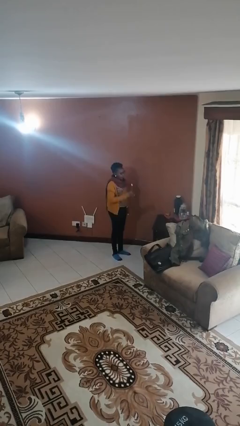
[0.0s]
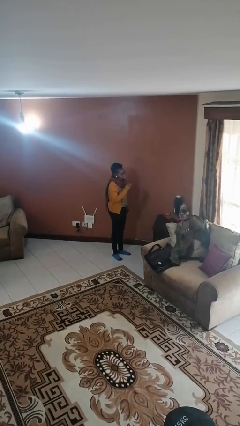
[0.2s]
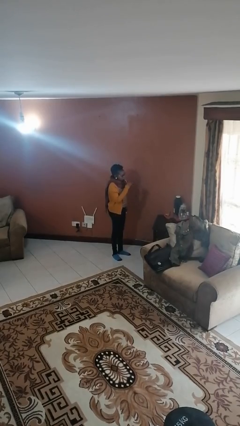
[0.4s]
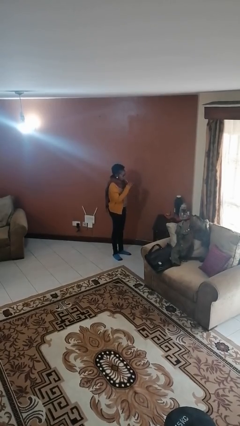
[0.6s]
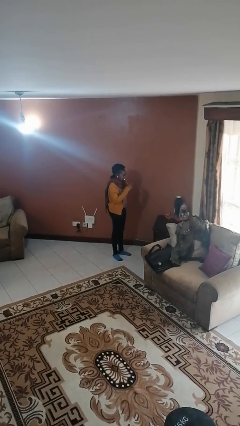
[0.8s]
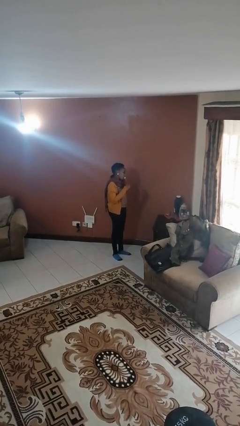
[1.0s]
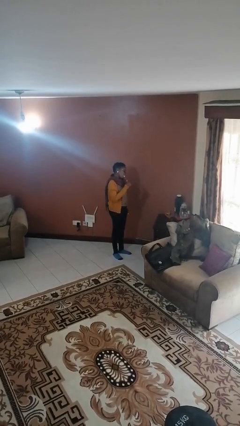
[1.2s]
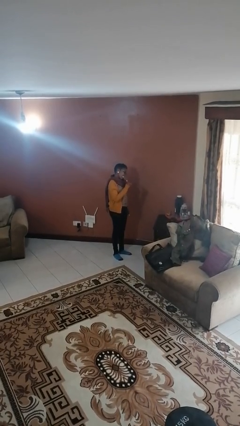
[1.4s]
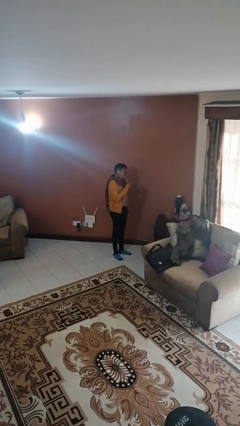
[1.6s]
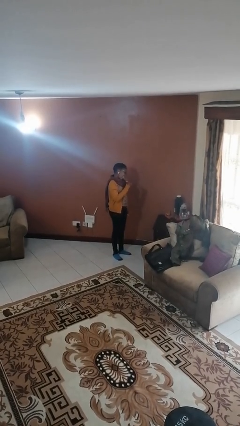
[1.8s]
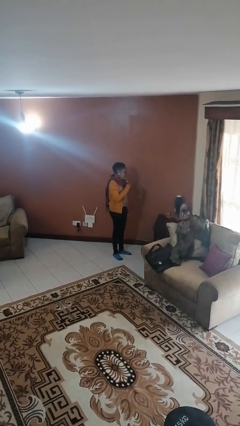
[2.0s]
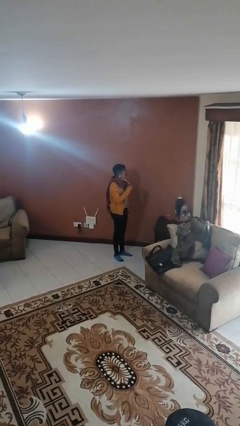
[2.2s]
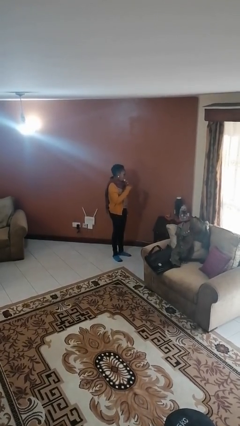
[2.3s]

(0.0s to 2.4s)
person brushes teeth

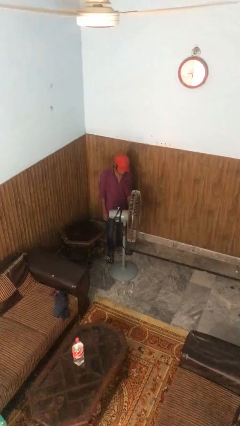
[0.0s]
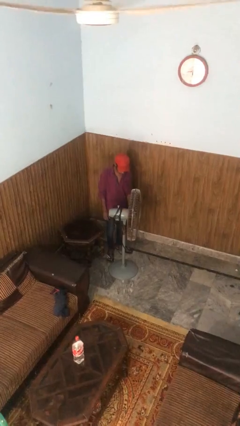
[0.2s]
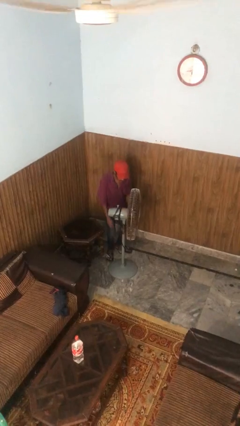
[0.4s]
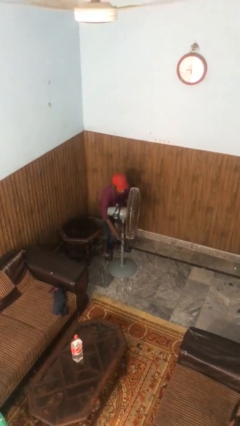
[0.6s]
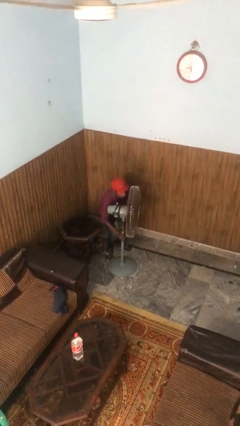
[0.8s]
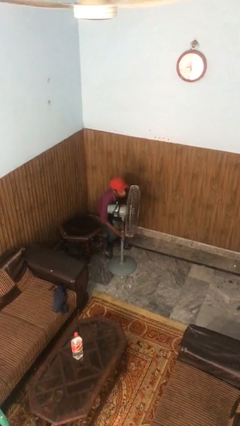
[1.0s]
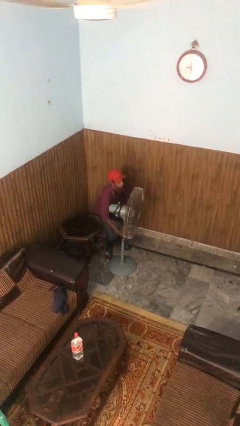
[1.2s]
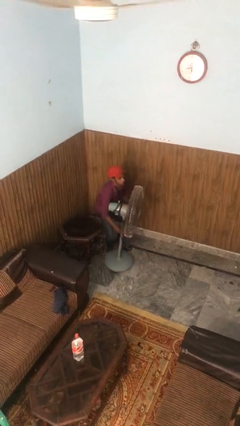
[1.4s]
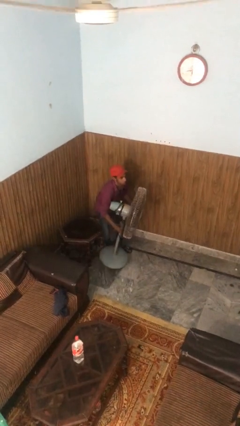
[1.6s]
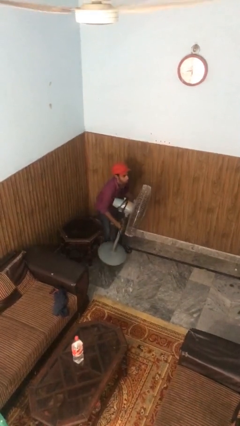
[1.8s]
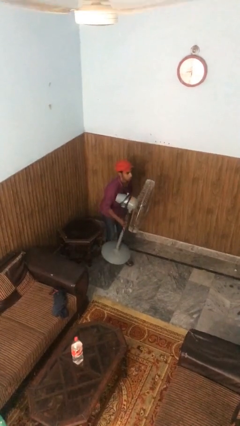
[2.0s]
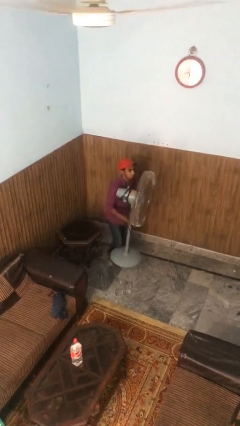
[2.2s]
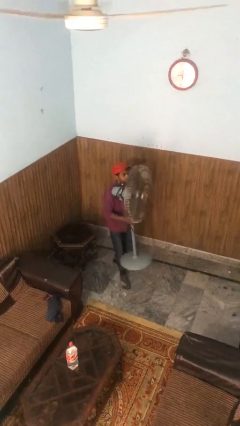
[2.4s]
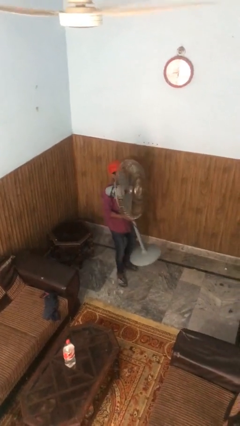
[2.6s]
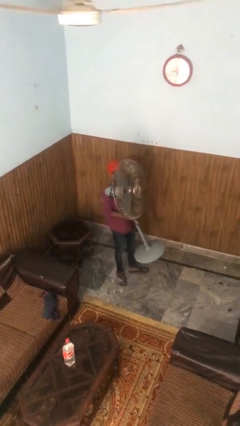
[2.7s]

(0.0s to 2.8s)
person picks up object from floor

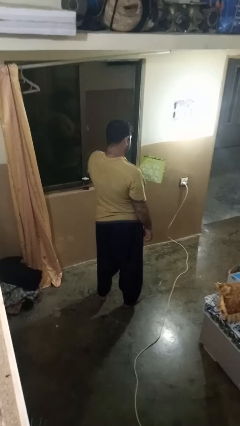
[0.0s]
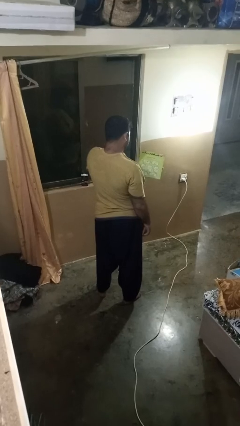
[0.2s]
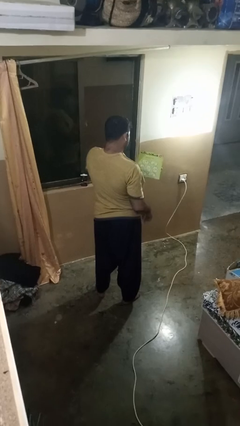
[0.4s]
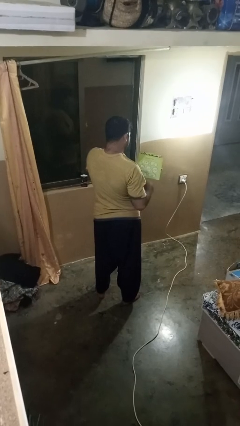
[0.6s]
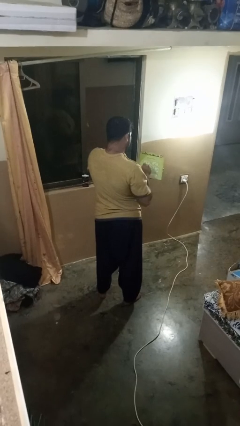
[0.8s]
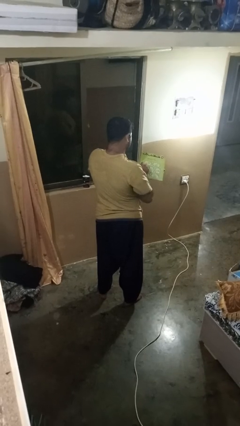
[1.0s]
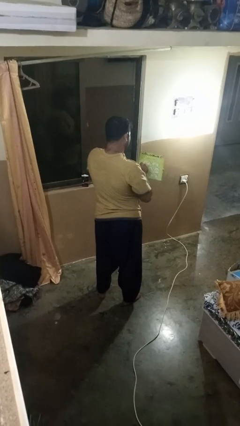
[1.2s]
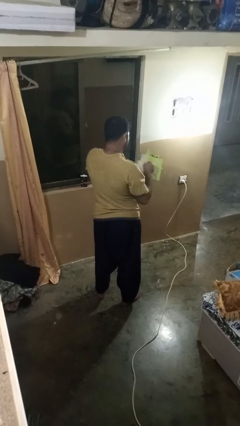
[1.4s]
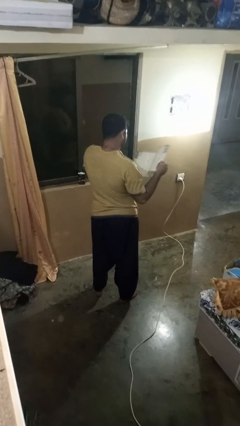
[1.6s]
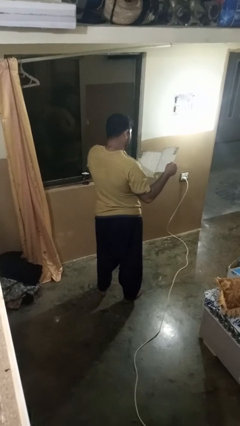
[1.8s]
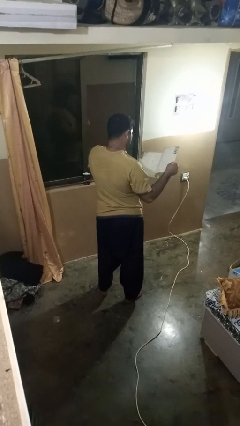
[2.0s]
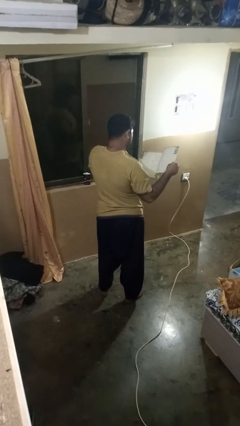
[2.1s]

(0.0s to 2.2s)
person reads magazine

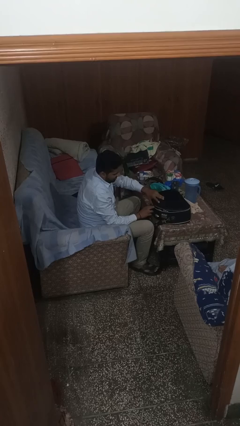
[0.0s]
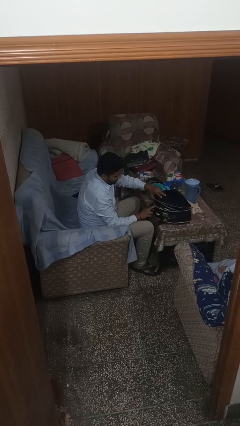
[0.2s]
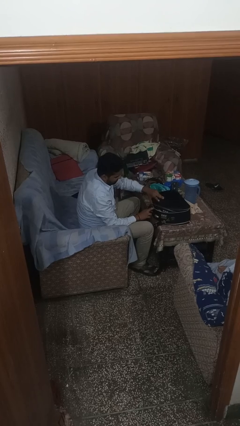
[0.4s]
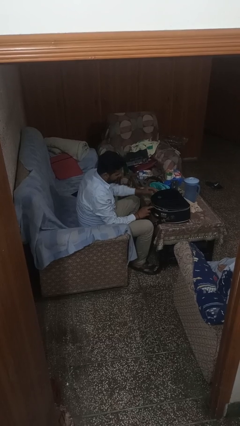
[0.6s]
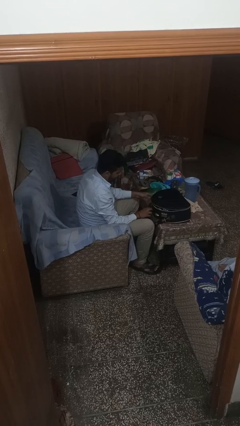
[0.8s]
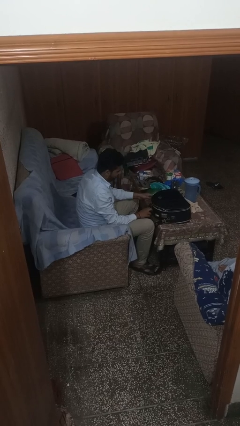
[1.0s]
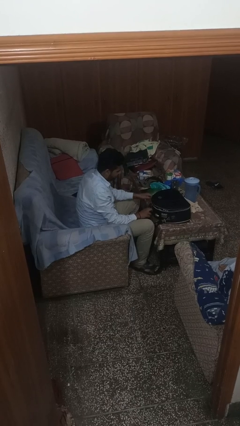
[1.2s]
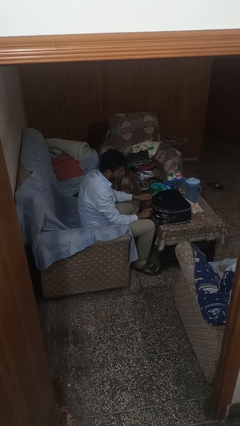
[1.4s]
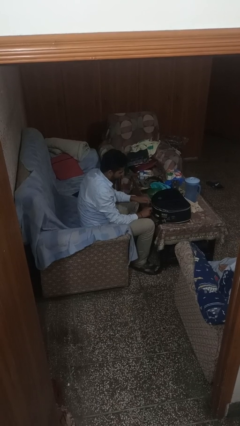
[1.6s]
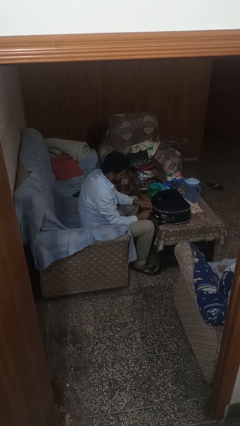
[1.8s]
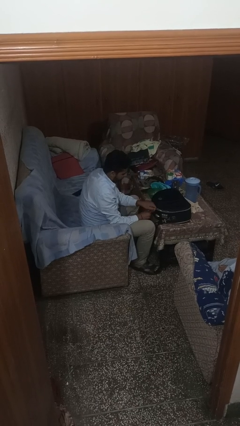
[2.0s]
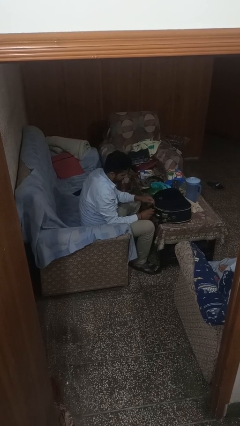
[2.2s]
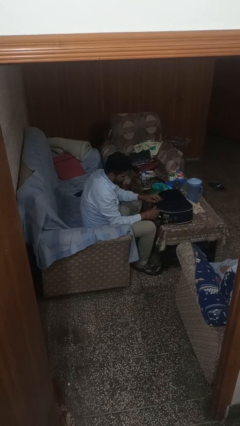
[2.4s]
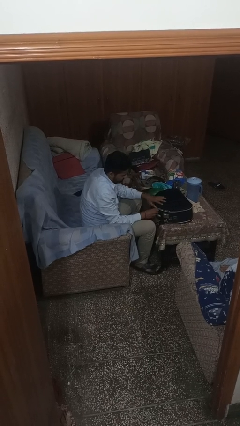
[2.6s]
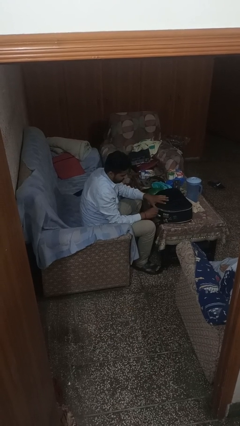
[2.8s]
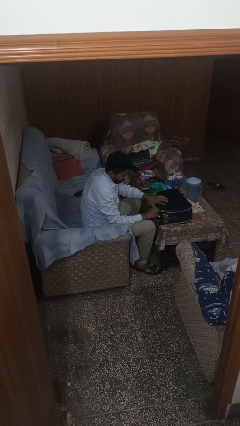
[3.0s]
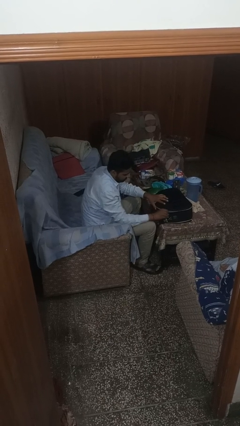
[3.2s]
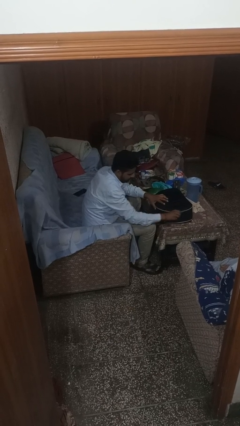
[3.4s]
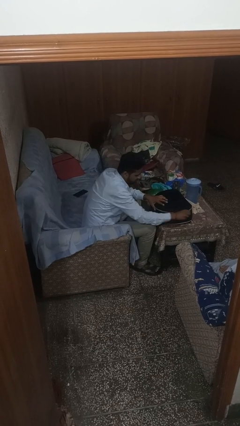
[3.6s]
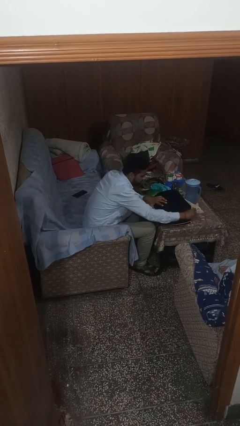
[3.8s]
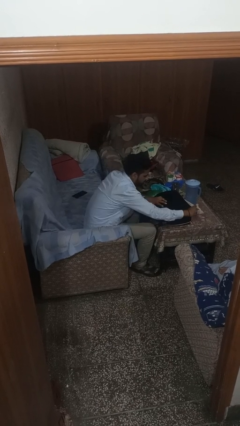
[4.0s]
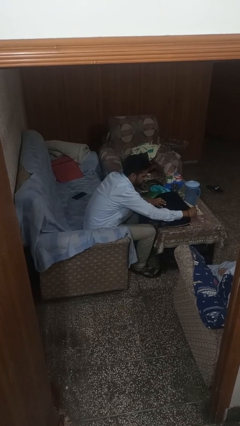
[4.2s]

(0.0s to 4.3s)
person closes suitcase

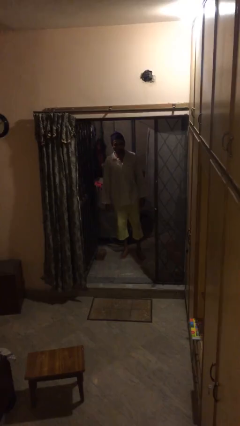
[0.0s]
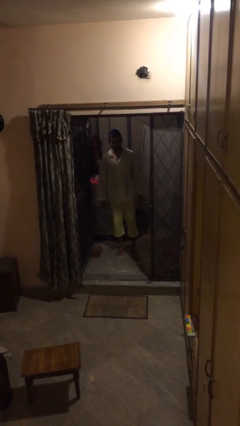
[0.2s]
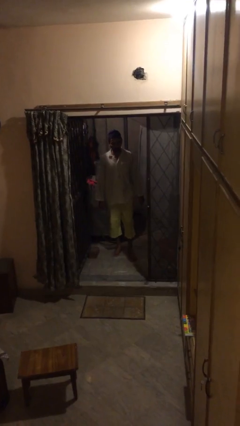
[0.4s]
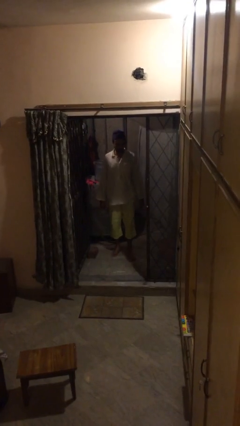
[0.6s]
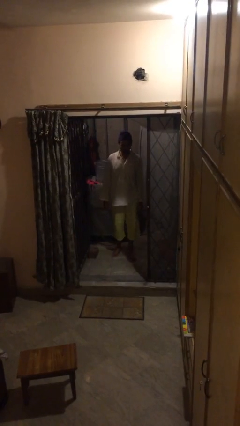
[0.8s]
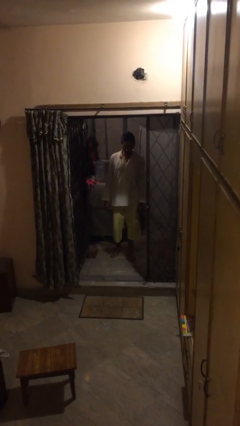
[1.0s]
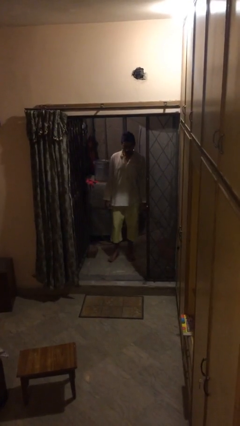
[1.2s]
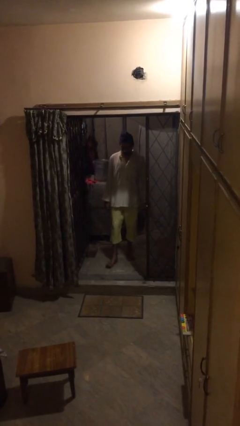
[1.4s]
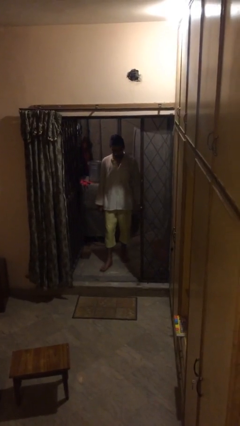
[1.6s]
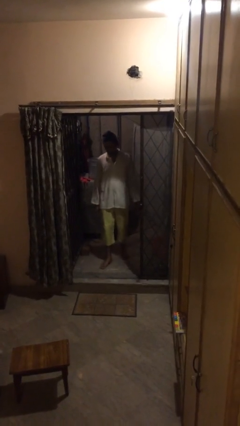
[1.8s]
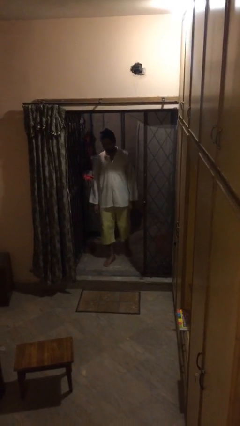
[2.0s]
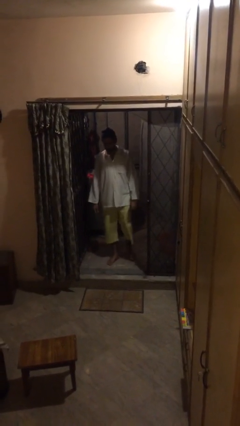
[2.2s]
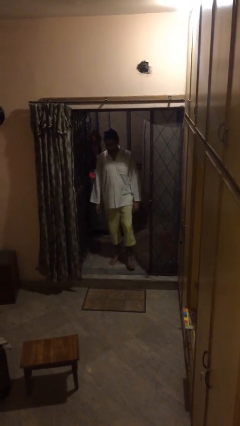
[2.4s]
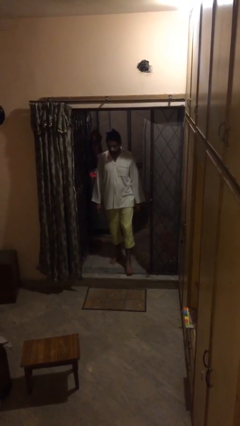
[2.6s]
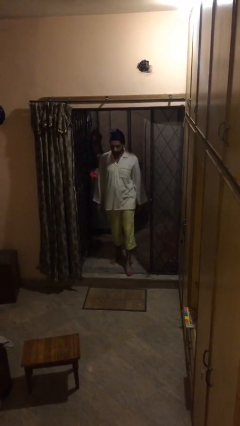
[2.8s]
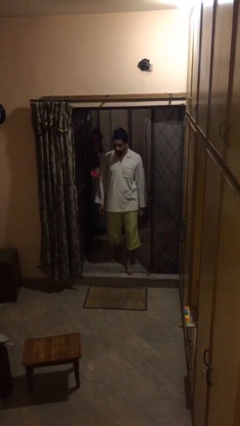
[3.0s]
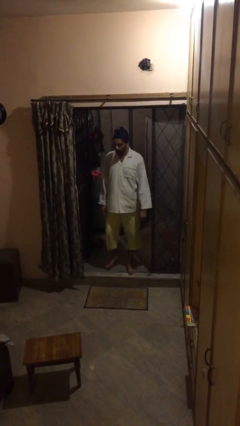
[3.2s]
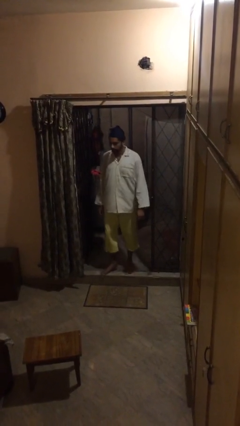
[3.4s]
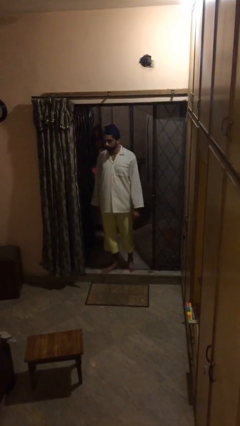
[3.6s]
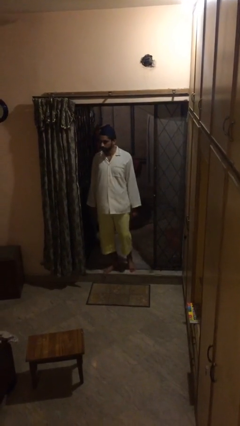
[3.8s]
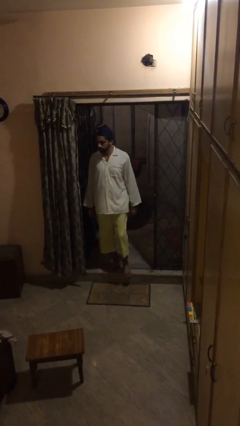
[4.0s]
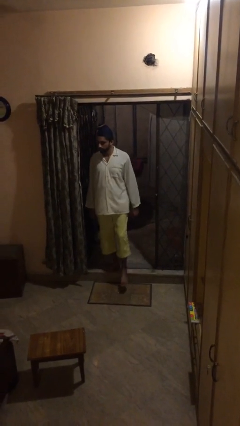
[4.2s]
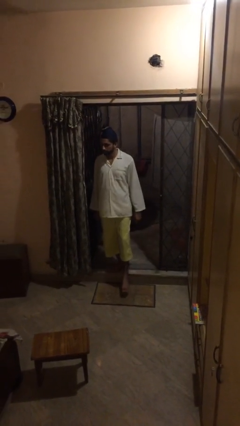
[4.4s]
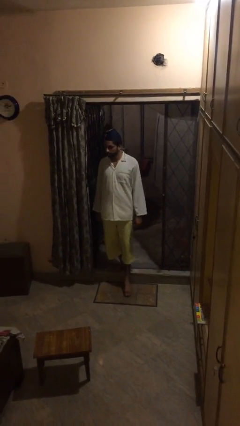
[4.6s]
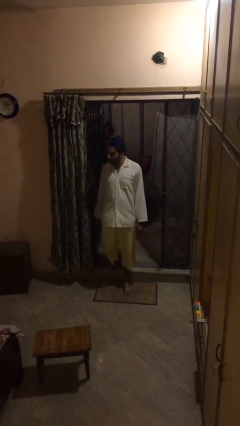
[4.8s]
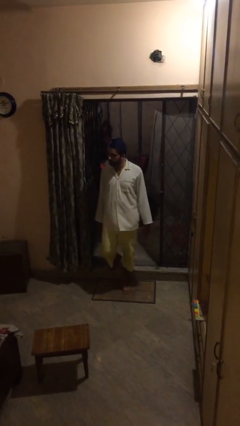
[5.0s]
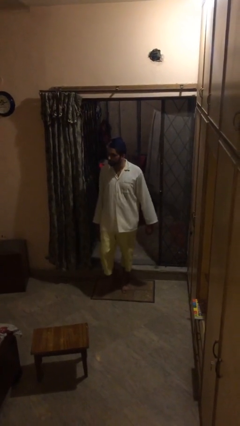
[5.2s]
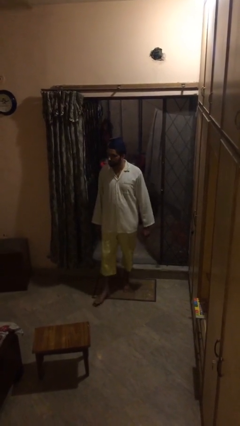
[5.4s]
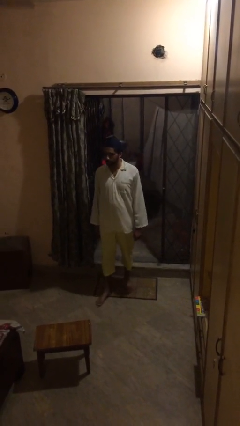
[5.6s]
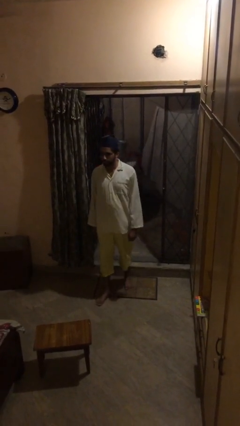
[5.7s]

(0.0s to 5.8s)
person enters scene through structure

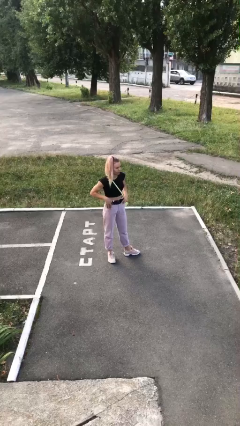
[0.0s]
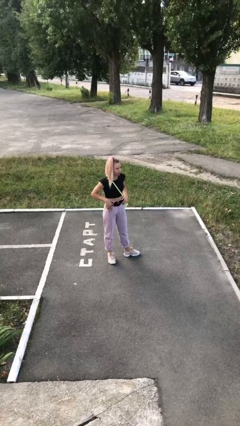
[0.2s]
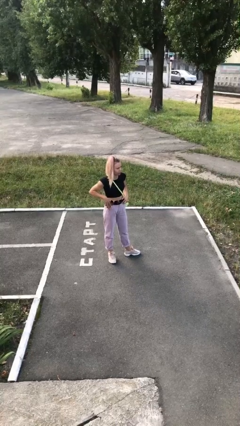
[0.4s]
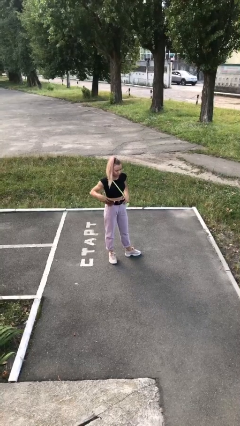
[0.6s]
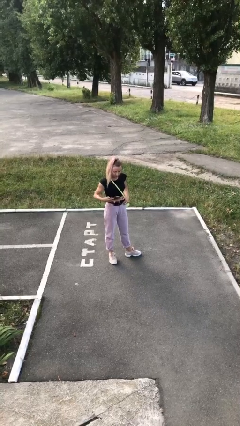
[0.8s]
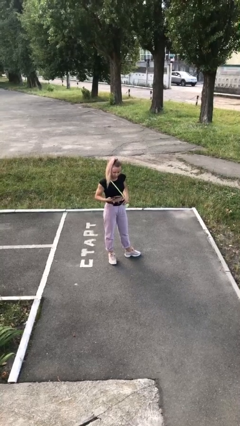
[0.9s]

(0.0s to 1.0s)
person takes phone from pocket
